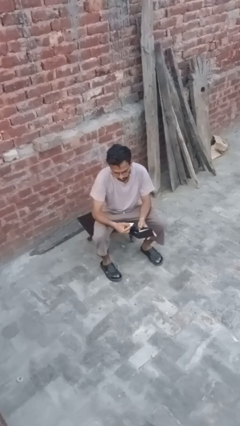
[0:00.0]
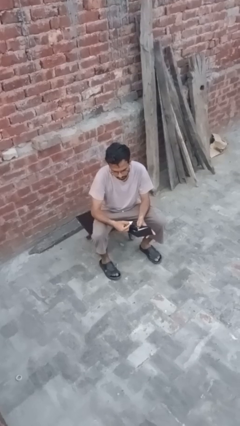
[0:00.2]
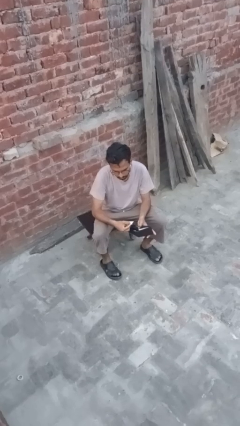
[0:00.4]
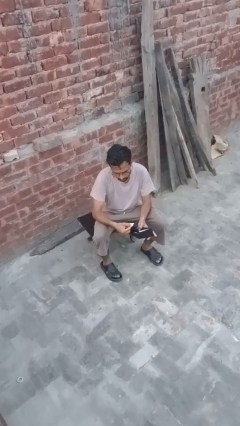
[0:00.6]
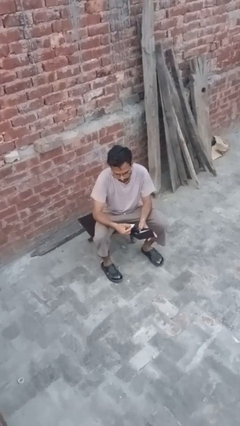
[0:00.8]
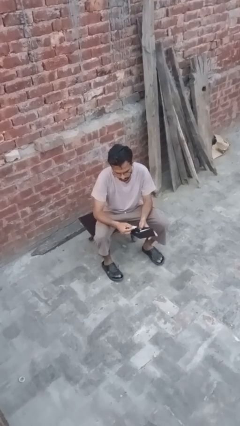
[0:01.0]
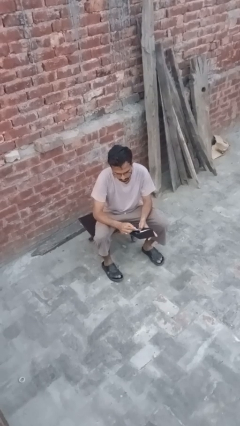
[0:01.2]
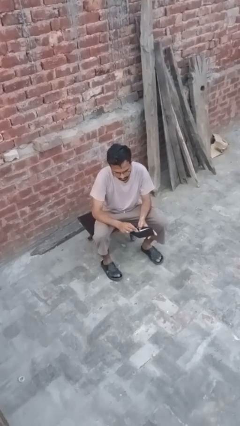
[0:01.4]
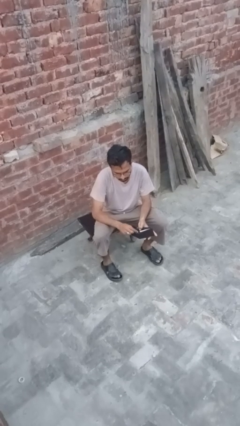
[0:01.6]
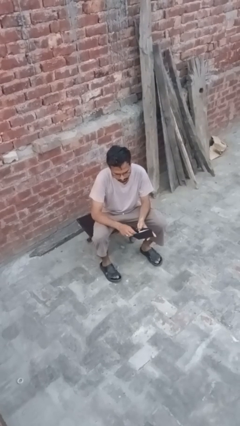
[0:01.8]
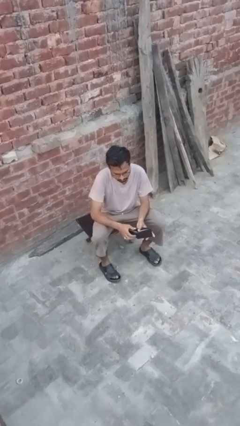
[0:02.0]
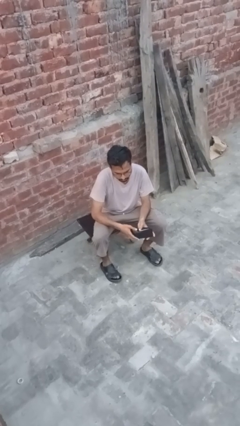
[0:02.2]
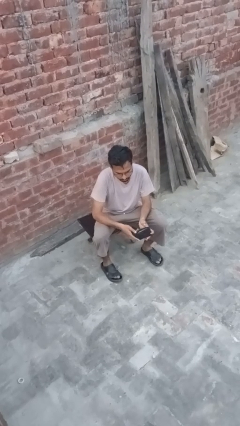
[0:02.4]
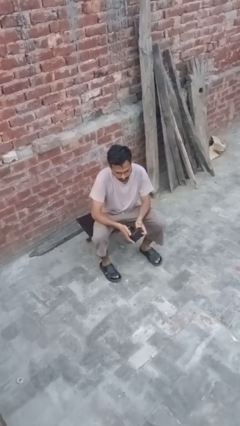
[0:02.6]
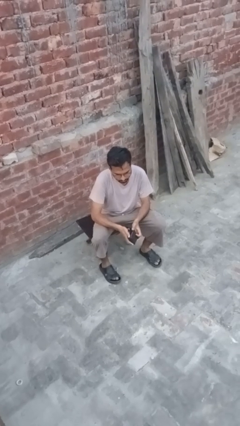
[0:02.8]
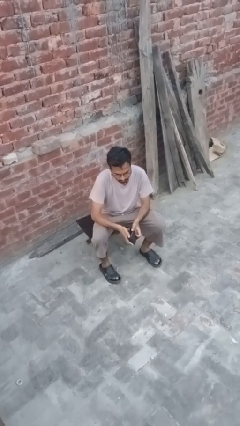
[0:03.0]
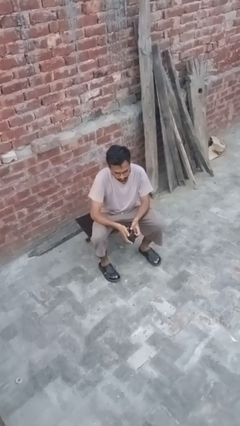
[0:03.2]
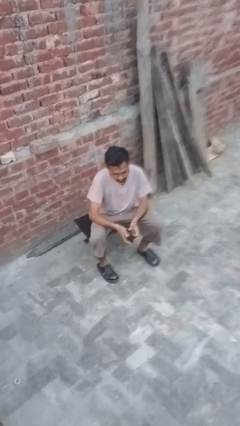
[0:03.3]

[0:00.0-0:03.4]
person puts object into purse

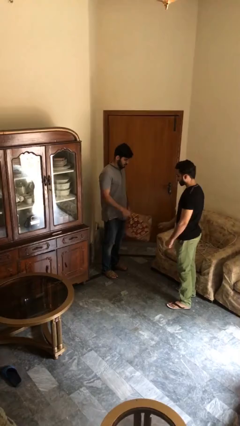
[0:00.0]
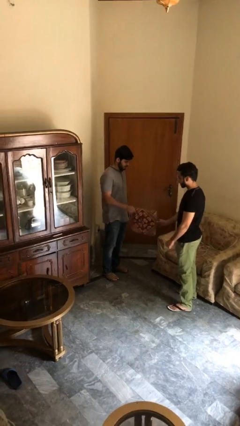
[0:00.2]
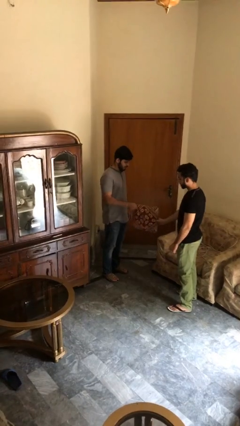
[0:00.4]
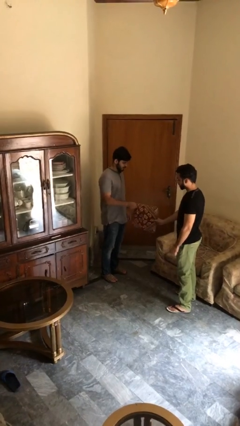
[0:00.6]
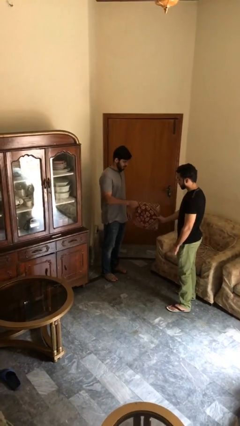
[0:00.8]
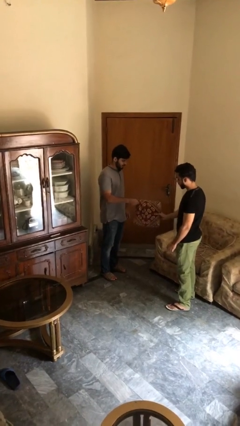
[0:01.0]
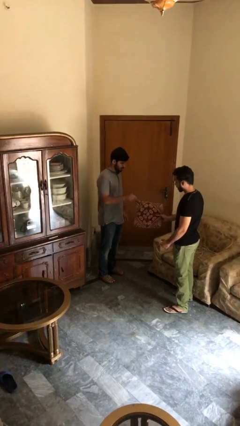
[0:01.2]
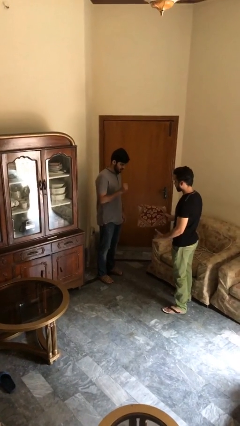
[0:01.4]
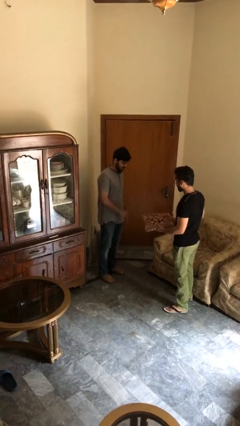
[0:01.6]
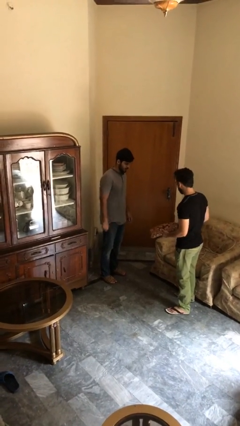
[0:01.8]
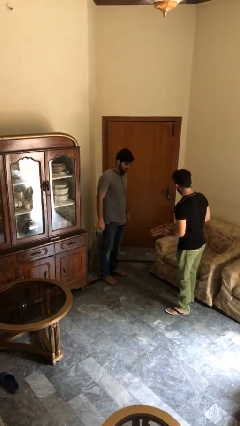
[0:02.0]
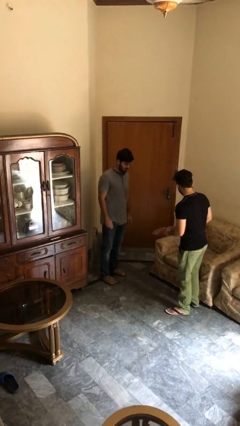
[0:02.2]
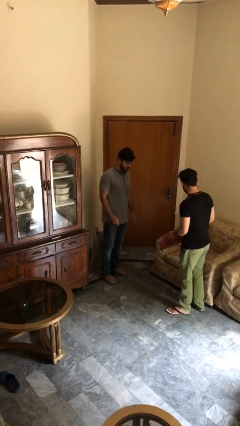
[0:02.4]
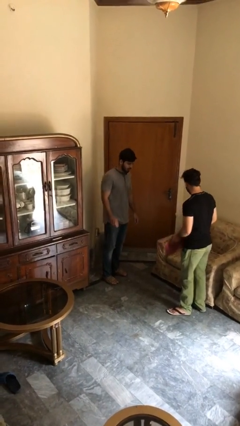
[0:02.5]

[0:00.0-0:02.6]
person transfers object to person

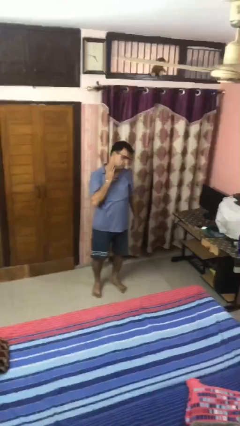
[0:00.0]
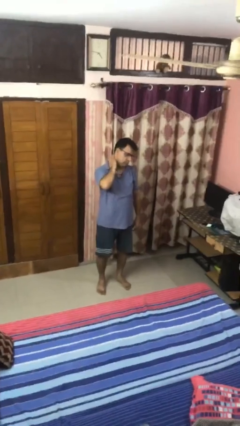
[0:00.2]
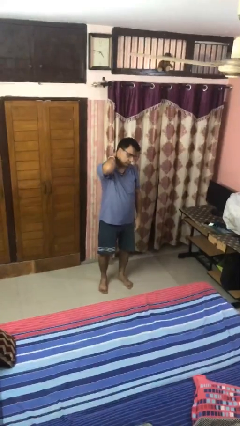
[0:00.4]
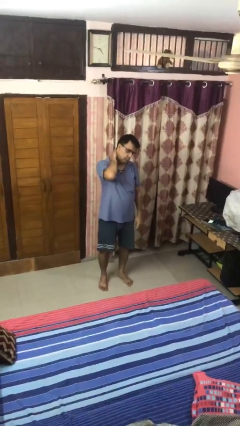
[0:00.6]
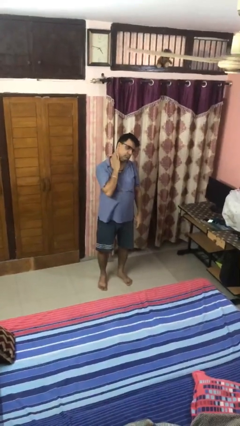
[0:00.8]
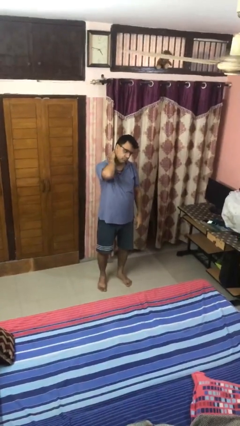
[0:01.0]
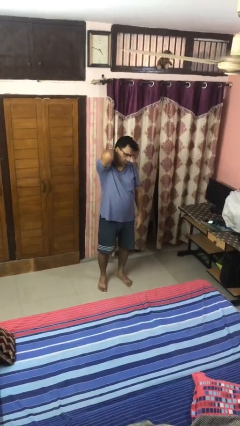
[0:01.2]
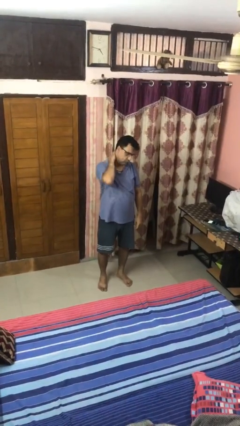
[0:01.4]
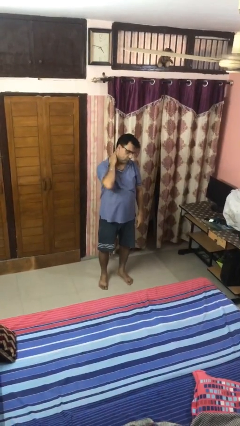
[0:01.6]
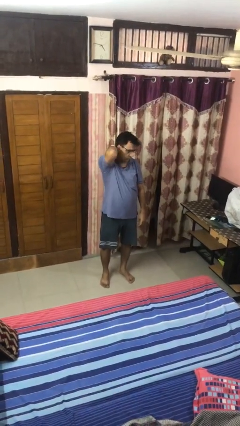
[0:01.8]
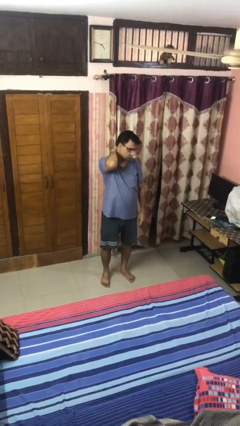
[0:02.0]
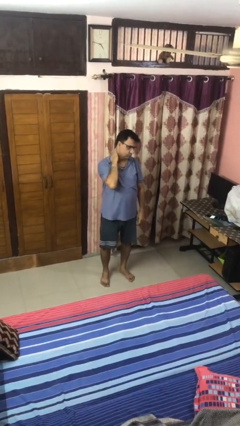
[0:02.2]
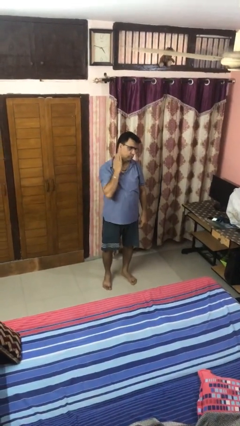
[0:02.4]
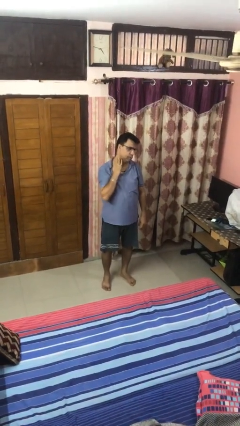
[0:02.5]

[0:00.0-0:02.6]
person rubs neck

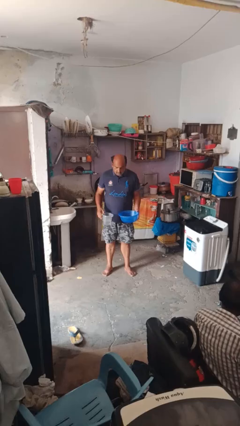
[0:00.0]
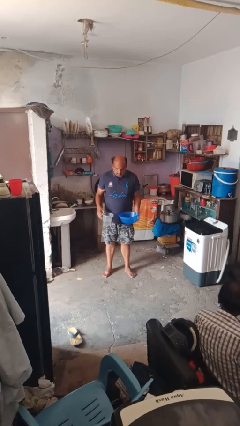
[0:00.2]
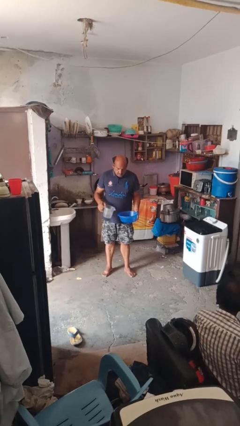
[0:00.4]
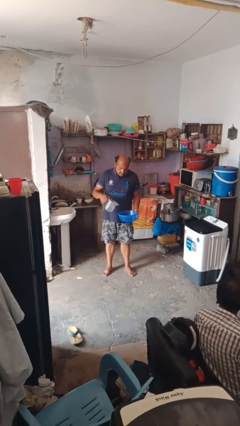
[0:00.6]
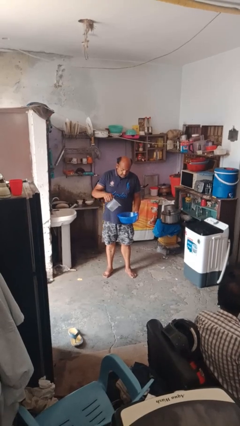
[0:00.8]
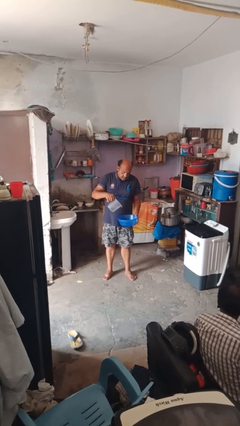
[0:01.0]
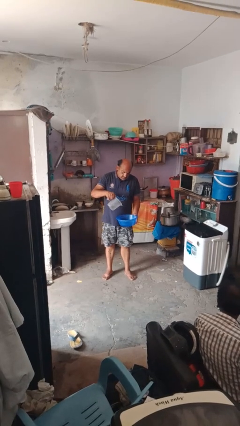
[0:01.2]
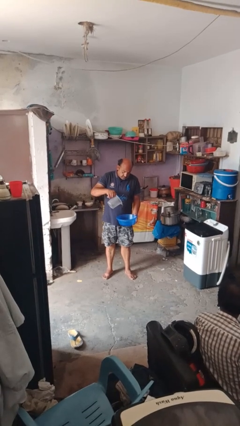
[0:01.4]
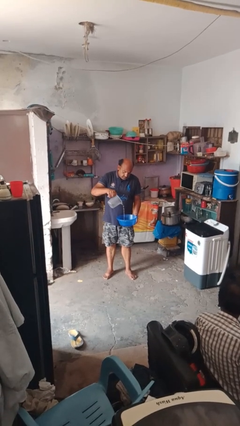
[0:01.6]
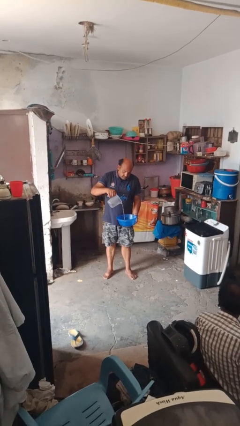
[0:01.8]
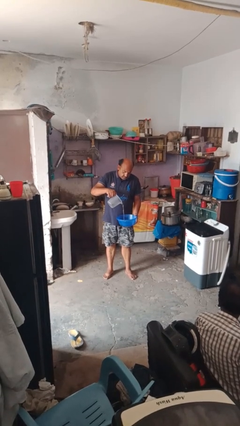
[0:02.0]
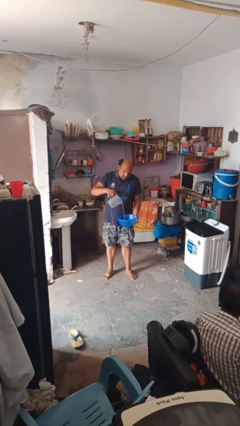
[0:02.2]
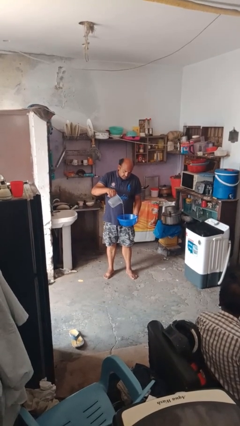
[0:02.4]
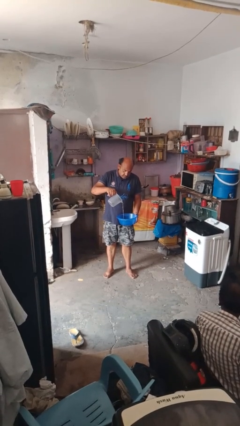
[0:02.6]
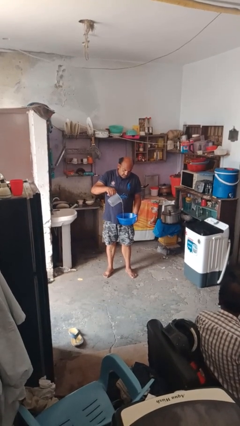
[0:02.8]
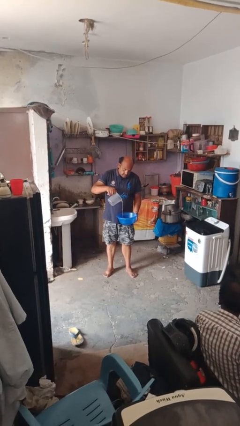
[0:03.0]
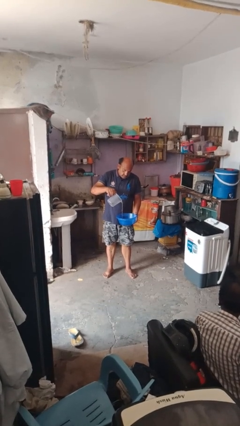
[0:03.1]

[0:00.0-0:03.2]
person pours into bowl

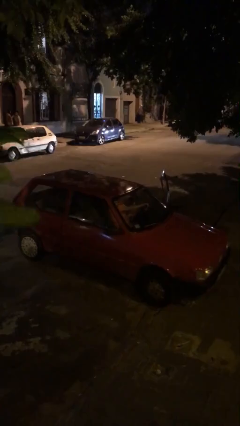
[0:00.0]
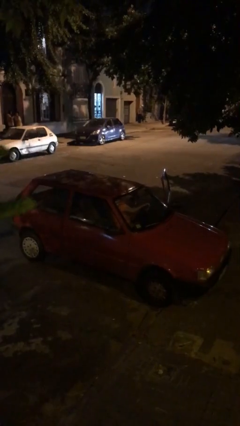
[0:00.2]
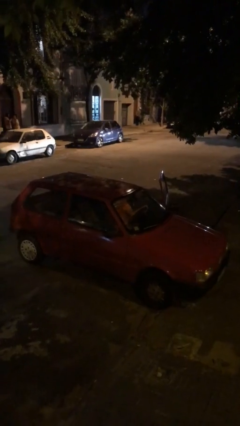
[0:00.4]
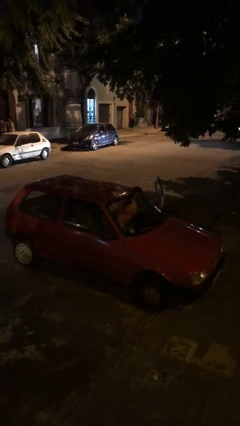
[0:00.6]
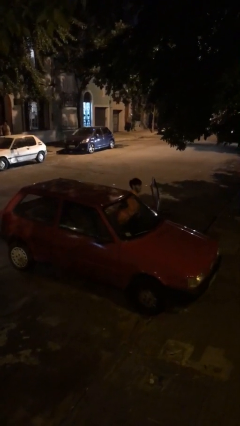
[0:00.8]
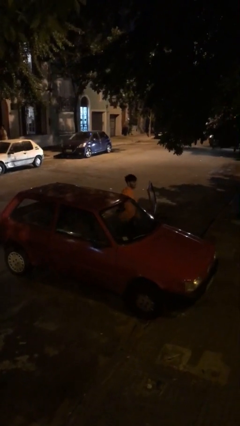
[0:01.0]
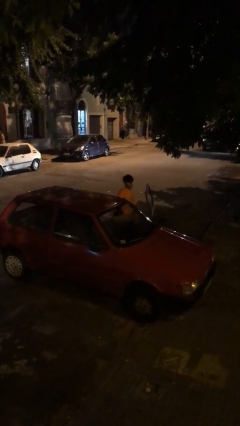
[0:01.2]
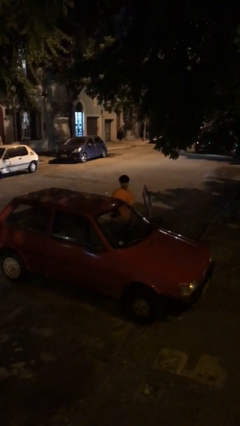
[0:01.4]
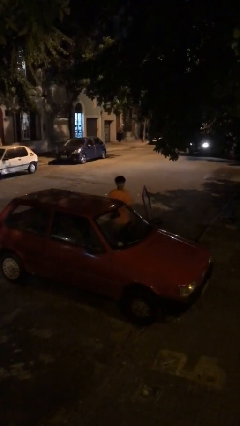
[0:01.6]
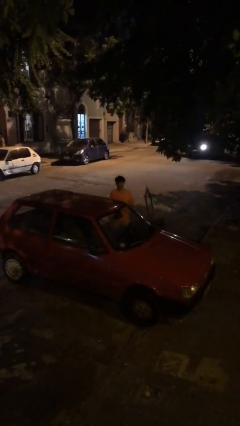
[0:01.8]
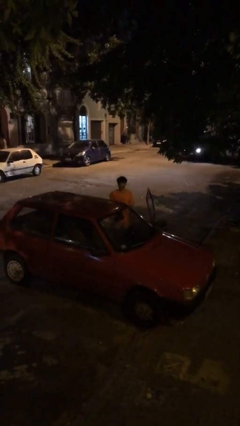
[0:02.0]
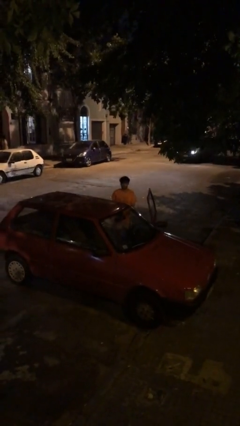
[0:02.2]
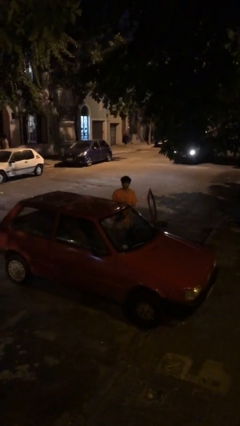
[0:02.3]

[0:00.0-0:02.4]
person exits car

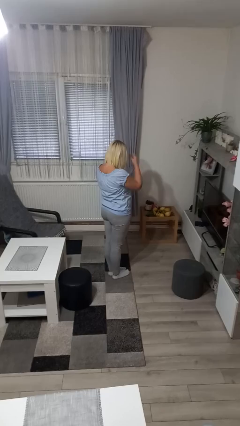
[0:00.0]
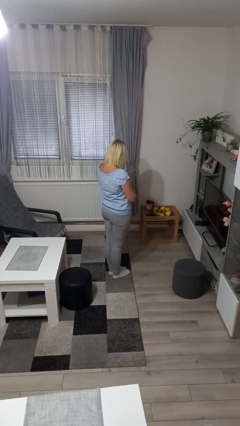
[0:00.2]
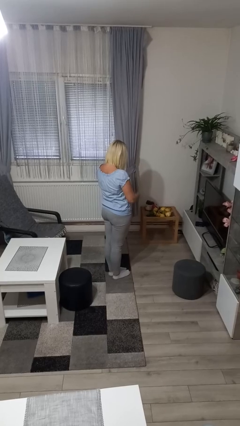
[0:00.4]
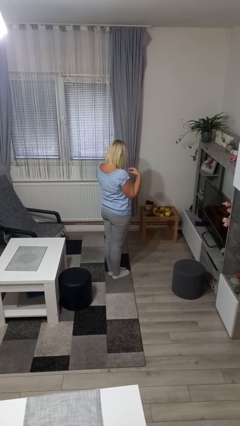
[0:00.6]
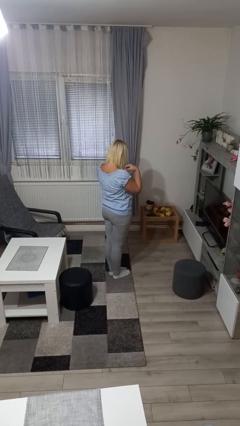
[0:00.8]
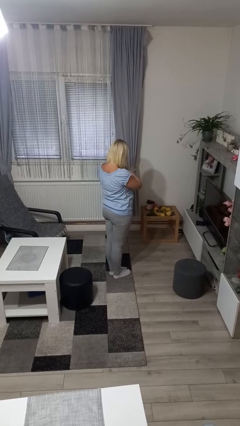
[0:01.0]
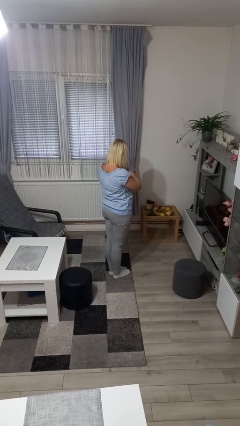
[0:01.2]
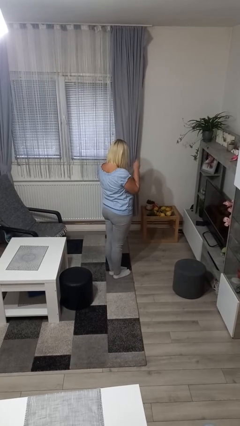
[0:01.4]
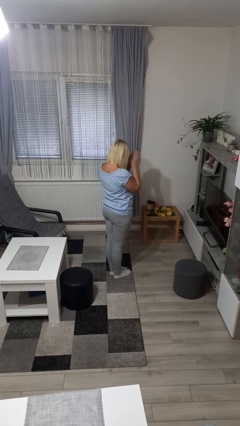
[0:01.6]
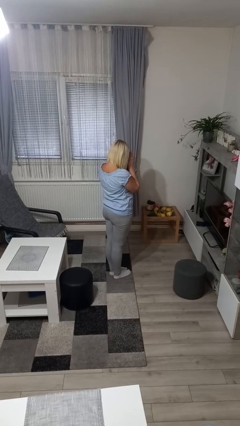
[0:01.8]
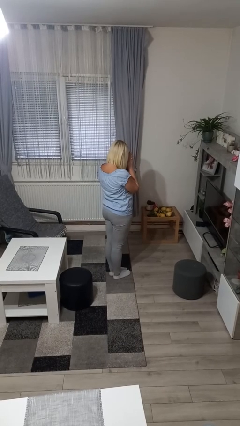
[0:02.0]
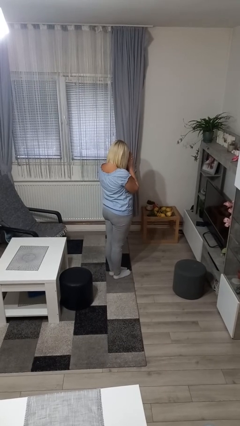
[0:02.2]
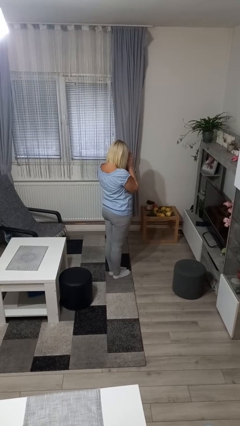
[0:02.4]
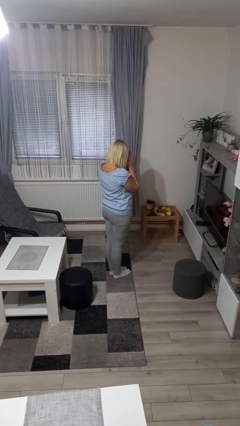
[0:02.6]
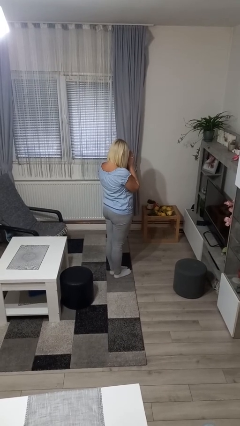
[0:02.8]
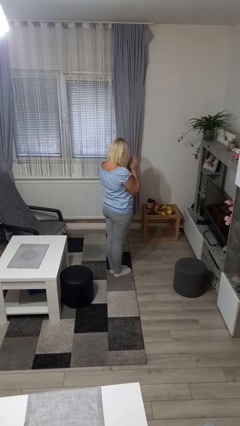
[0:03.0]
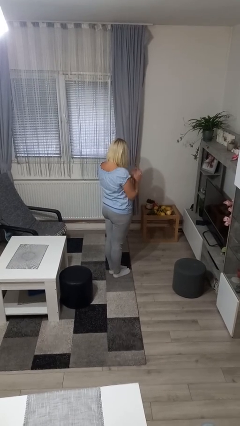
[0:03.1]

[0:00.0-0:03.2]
person prays
